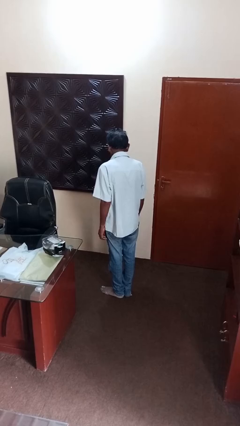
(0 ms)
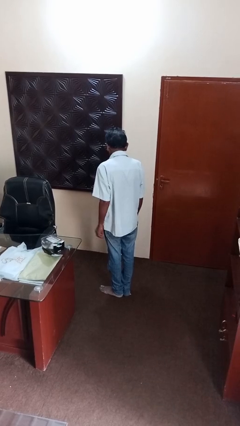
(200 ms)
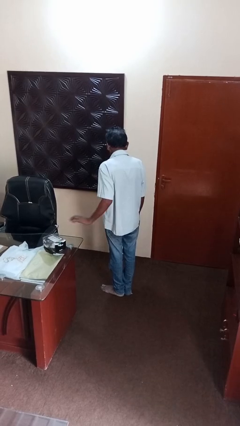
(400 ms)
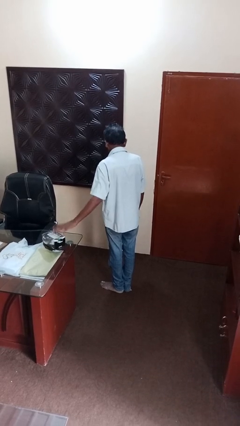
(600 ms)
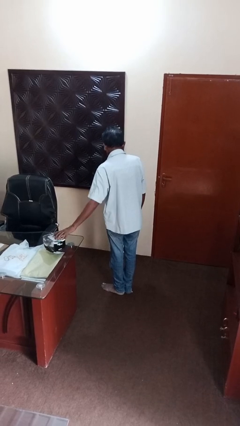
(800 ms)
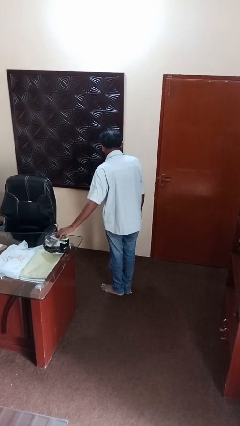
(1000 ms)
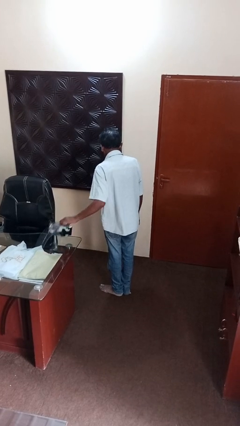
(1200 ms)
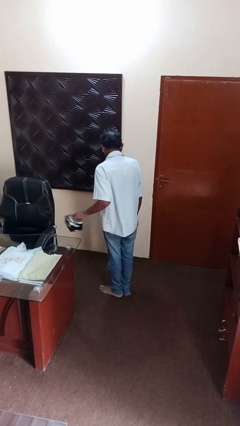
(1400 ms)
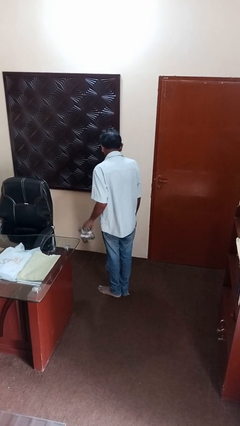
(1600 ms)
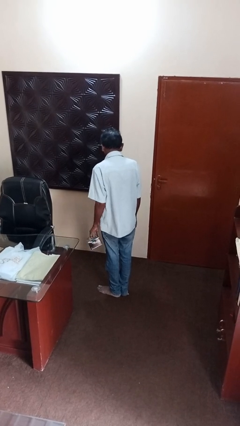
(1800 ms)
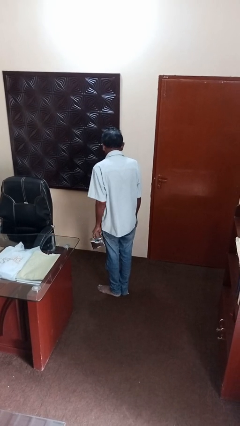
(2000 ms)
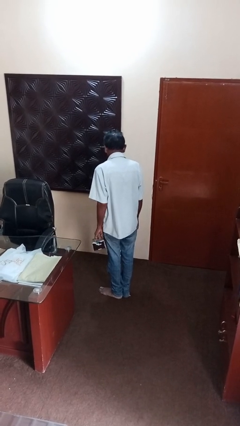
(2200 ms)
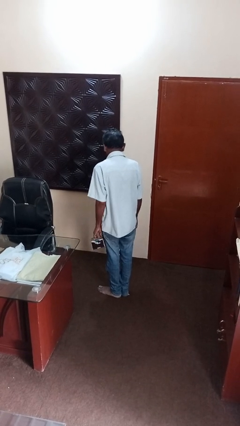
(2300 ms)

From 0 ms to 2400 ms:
person picks up object from table

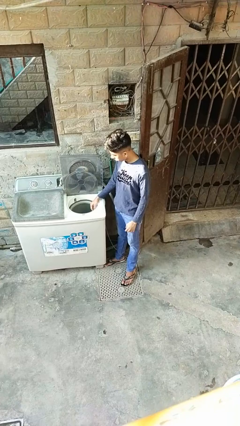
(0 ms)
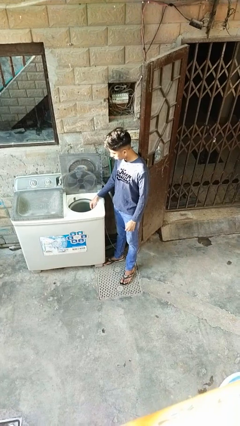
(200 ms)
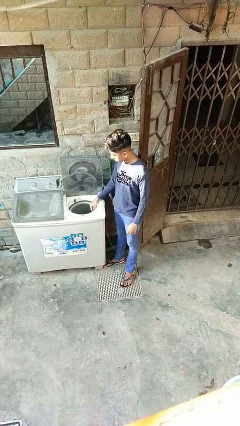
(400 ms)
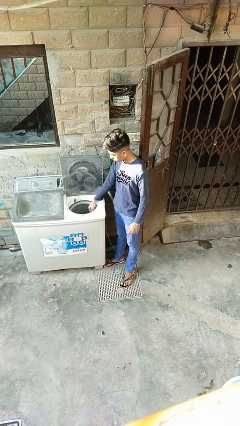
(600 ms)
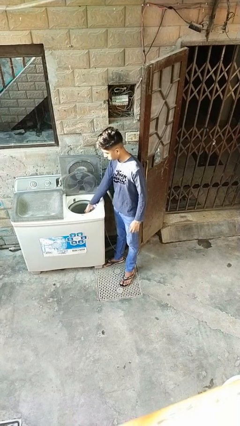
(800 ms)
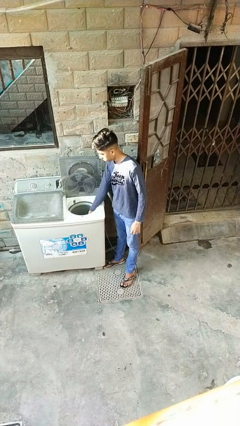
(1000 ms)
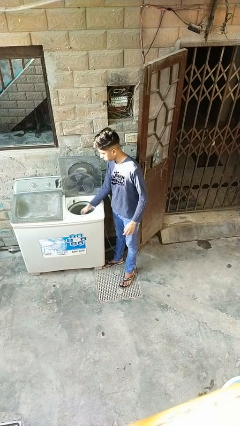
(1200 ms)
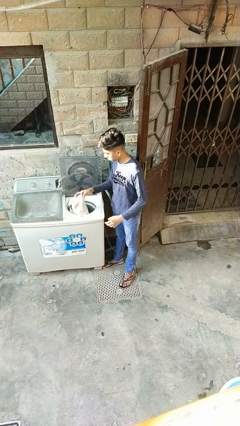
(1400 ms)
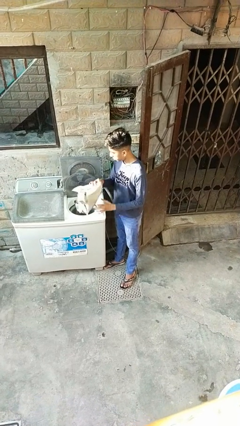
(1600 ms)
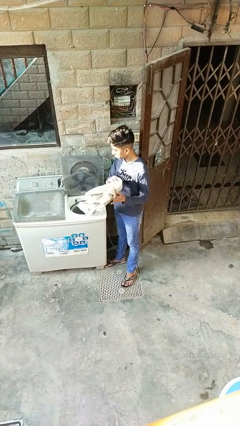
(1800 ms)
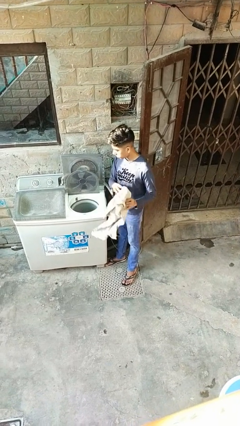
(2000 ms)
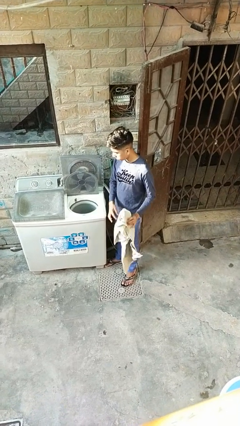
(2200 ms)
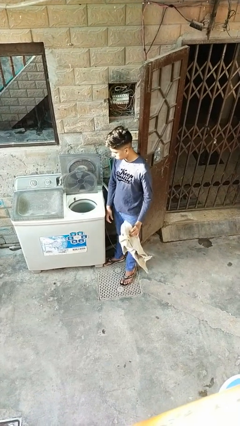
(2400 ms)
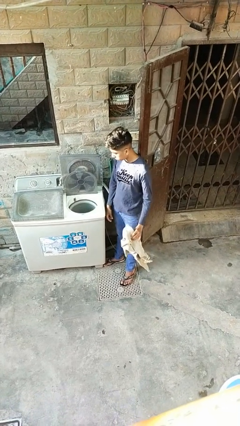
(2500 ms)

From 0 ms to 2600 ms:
person unloads dryer

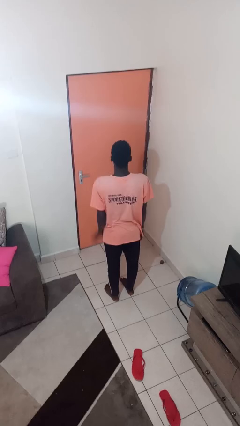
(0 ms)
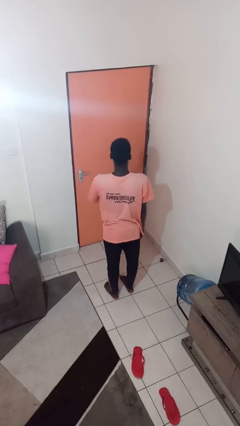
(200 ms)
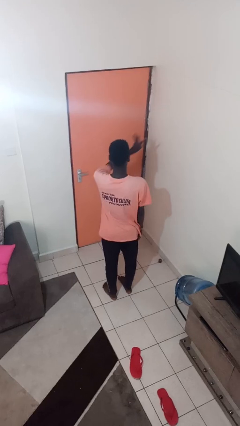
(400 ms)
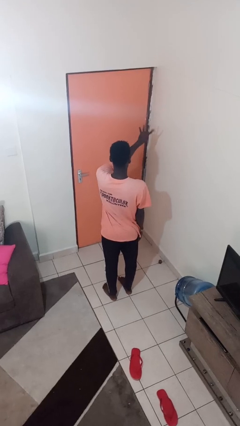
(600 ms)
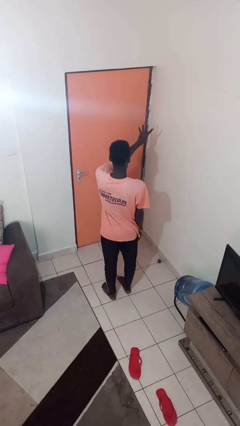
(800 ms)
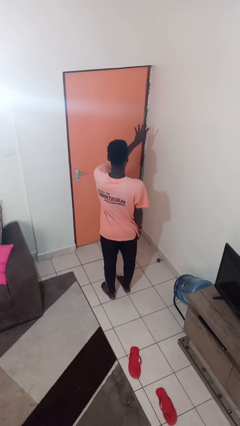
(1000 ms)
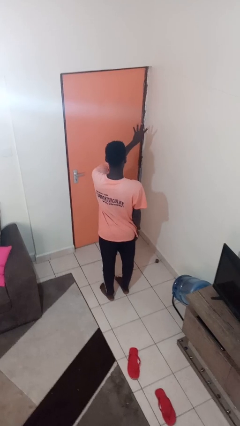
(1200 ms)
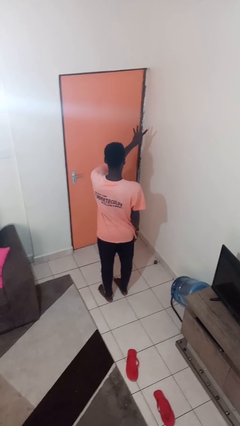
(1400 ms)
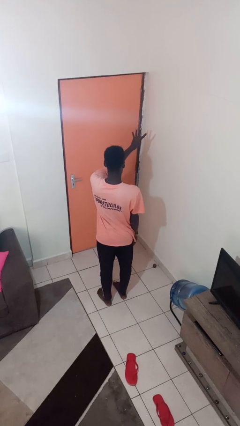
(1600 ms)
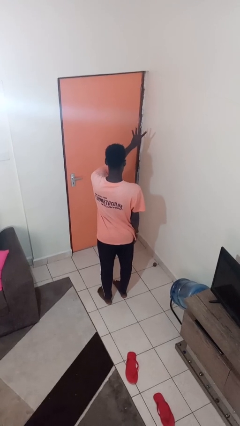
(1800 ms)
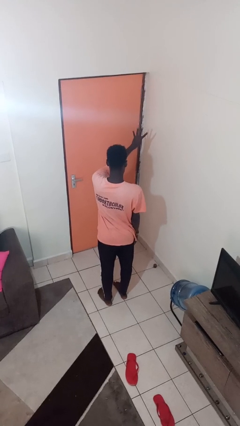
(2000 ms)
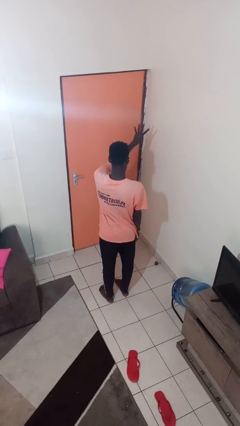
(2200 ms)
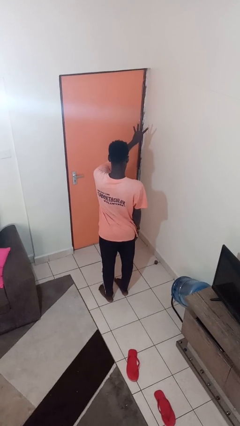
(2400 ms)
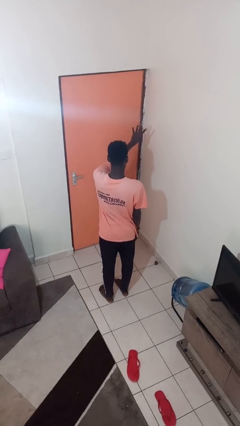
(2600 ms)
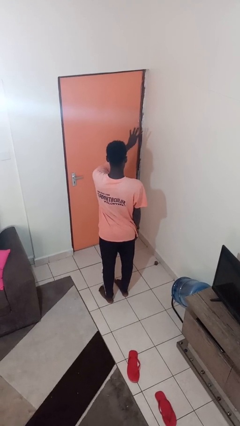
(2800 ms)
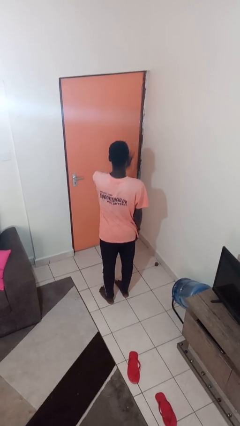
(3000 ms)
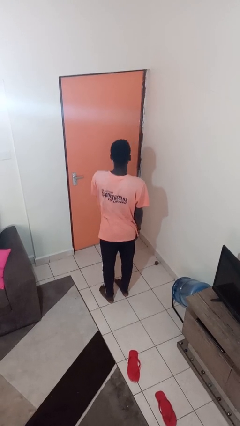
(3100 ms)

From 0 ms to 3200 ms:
person gestures number four

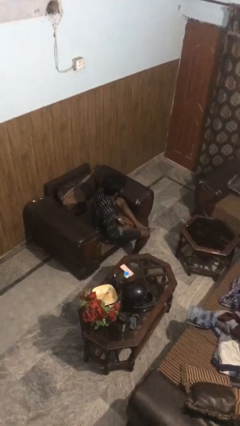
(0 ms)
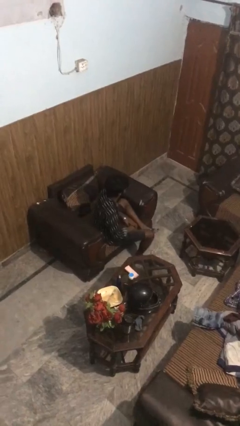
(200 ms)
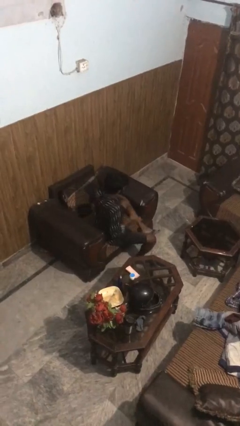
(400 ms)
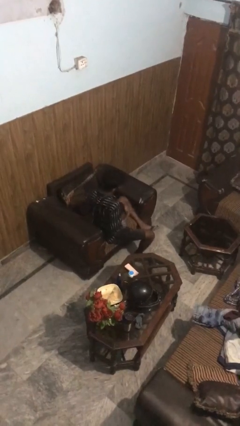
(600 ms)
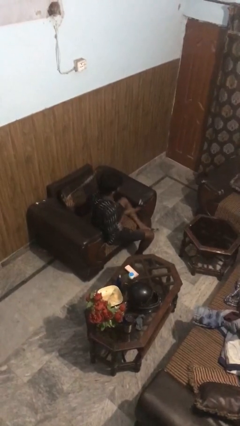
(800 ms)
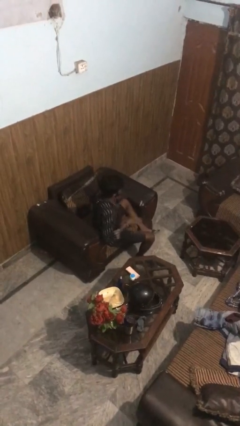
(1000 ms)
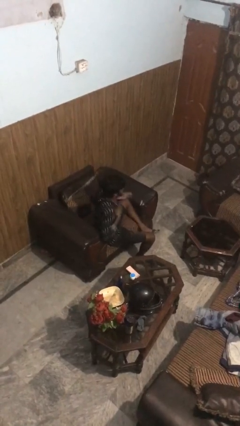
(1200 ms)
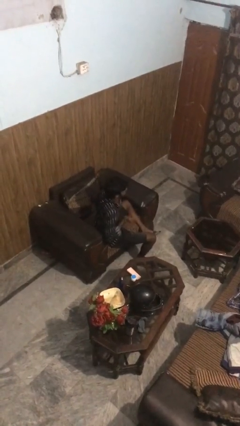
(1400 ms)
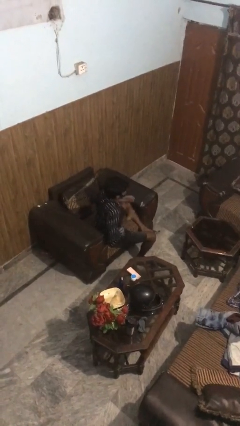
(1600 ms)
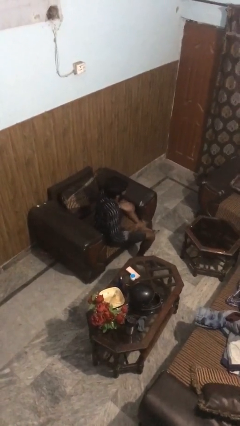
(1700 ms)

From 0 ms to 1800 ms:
person drums on chest

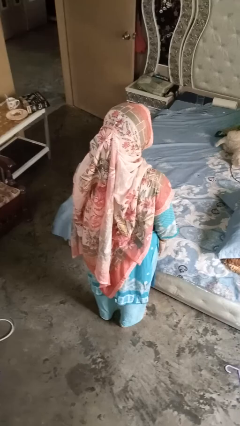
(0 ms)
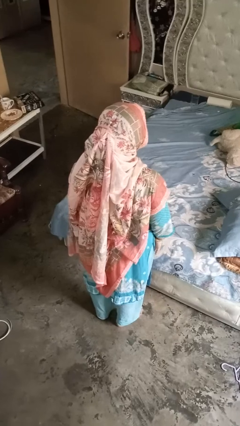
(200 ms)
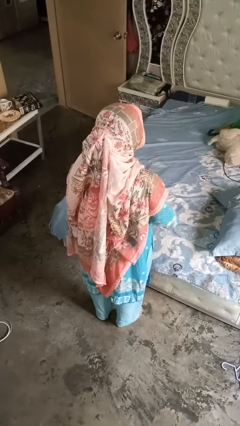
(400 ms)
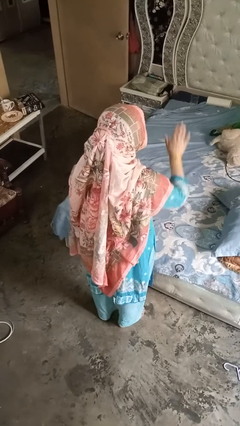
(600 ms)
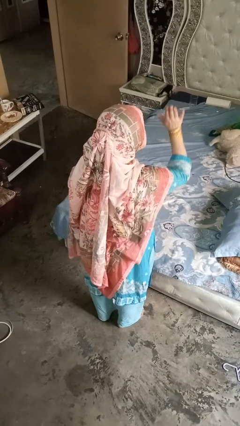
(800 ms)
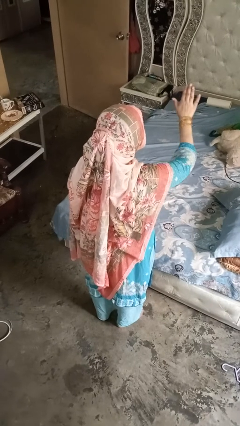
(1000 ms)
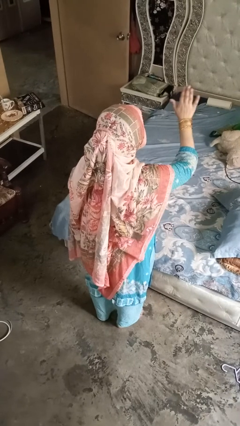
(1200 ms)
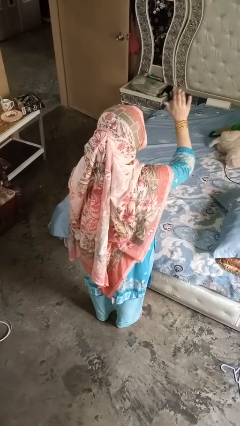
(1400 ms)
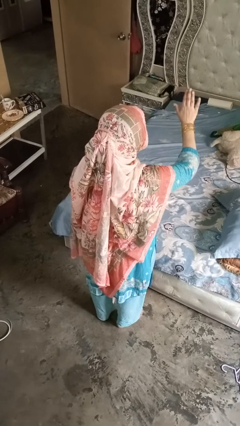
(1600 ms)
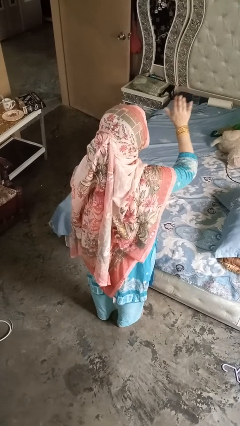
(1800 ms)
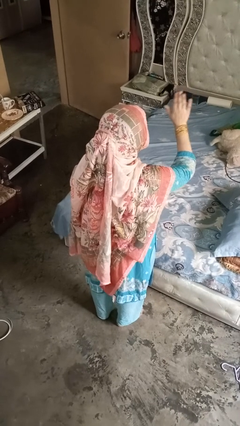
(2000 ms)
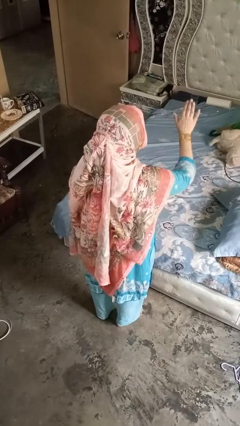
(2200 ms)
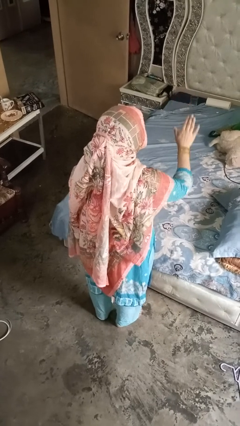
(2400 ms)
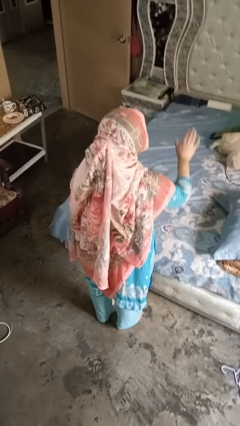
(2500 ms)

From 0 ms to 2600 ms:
person gestures stop

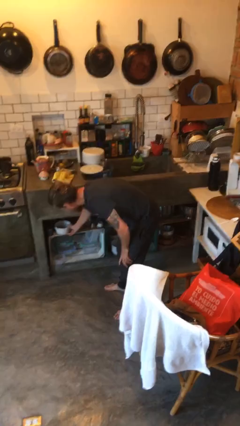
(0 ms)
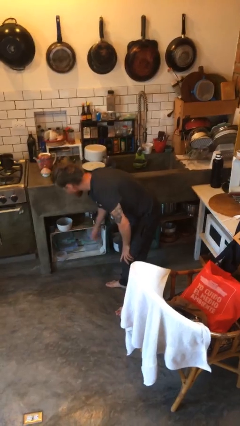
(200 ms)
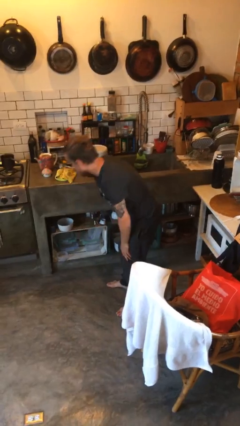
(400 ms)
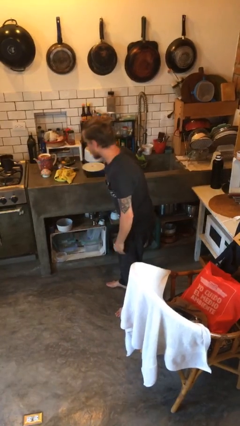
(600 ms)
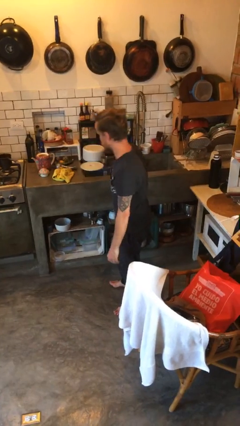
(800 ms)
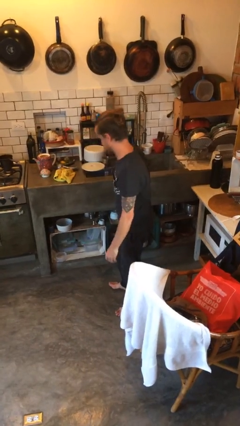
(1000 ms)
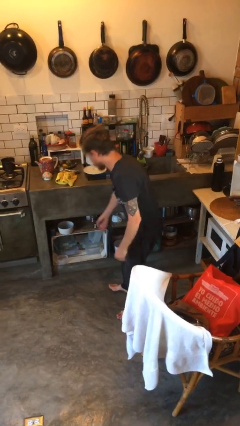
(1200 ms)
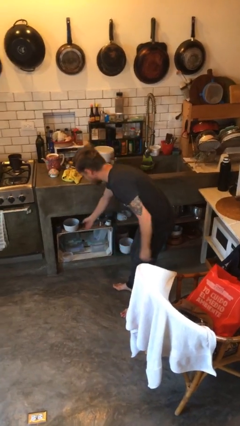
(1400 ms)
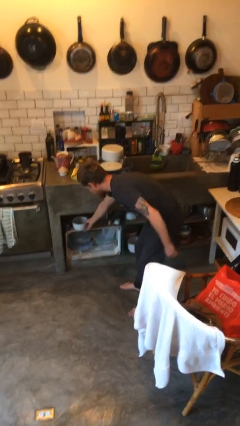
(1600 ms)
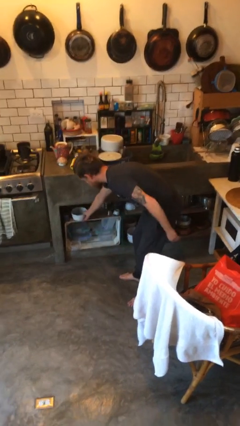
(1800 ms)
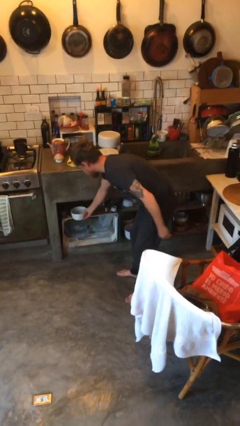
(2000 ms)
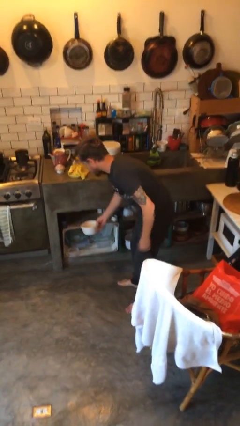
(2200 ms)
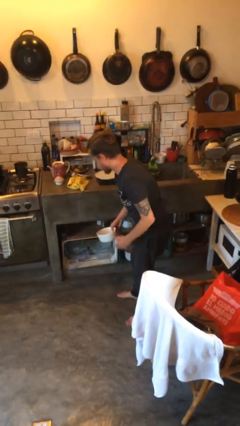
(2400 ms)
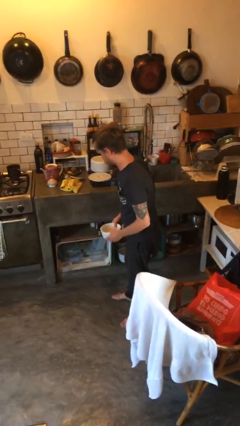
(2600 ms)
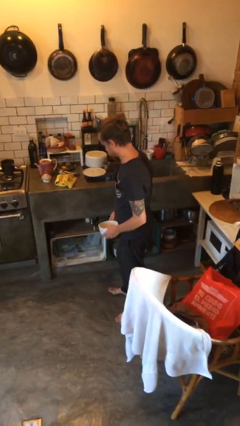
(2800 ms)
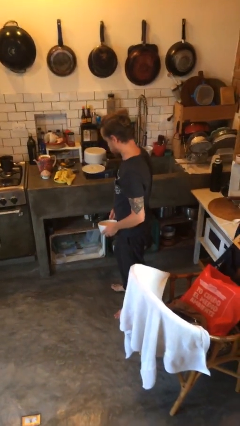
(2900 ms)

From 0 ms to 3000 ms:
person picks up object from cabinet

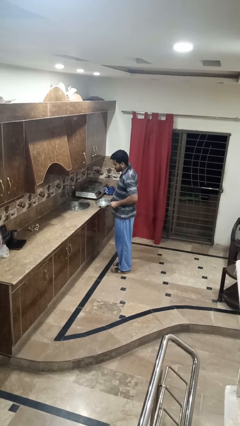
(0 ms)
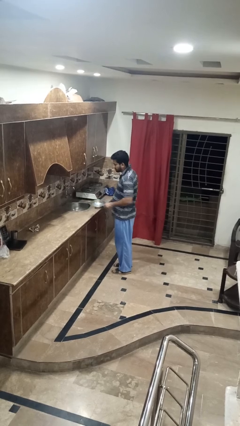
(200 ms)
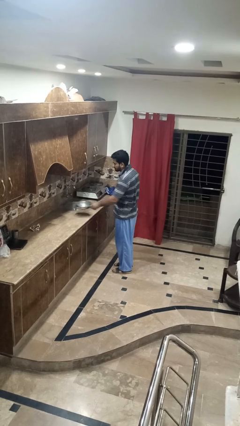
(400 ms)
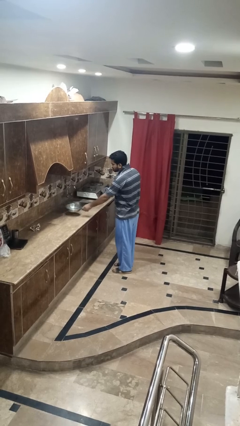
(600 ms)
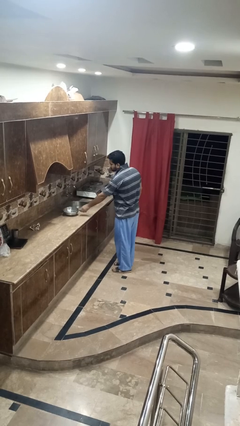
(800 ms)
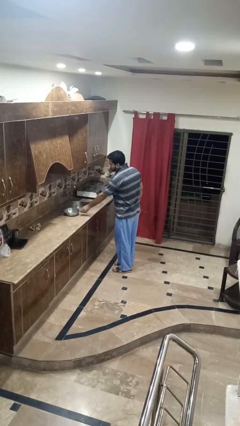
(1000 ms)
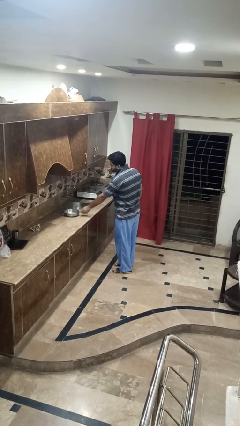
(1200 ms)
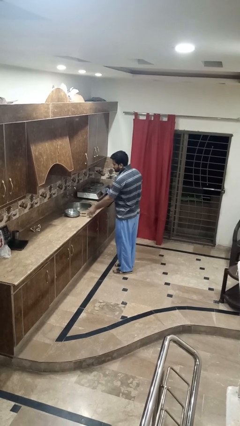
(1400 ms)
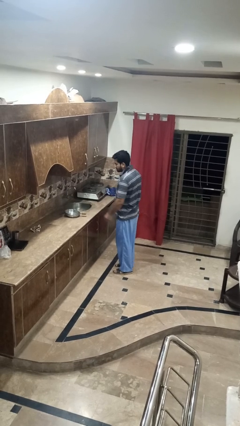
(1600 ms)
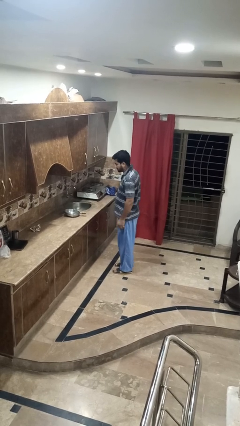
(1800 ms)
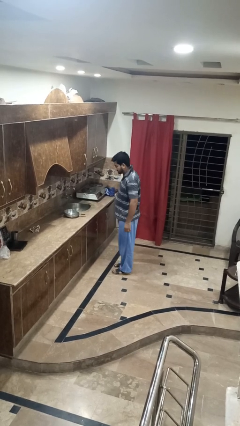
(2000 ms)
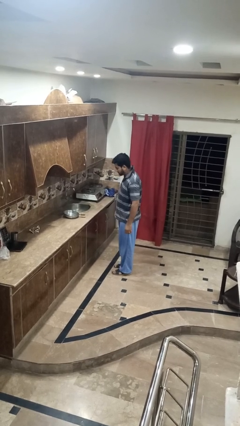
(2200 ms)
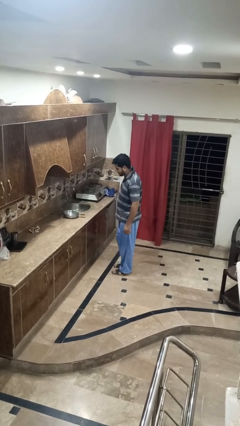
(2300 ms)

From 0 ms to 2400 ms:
person puts down object on countertop
